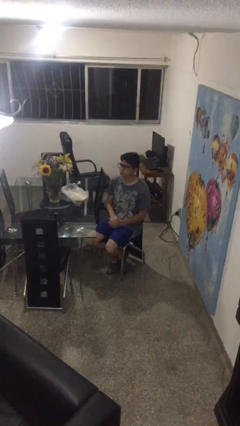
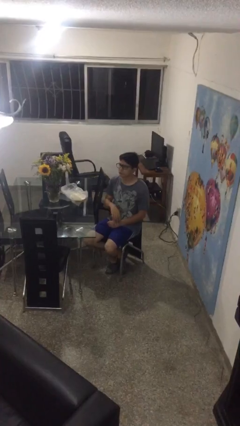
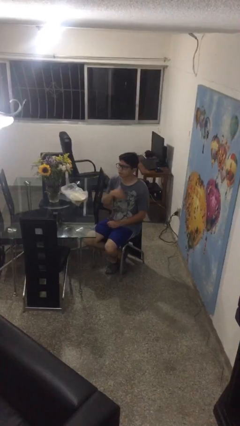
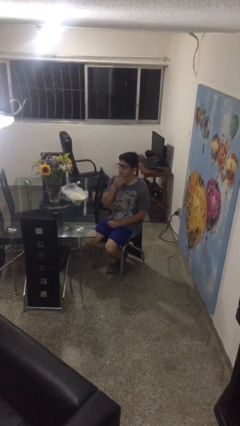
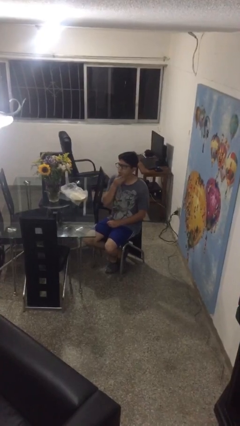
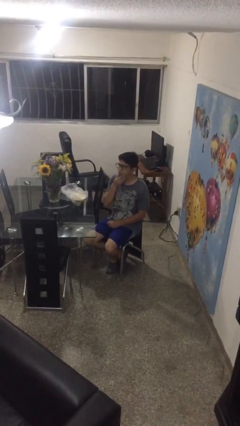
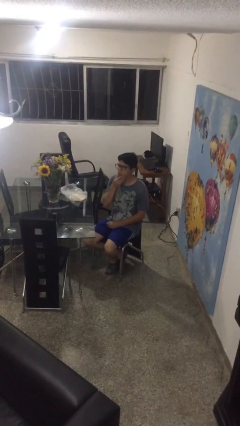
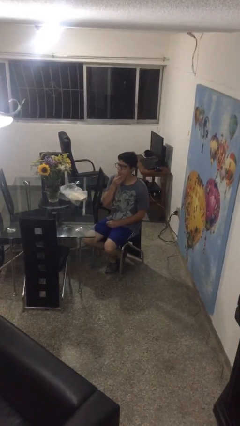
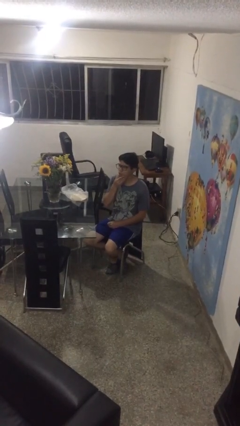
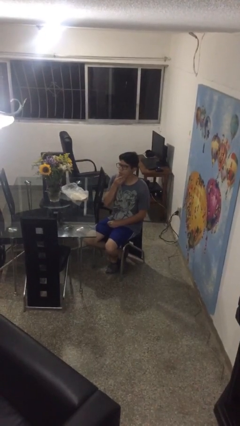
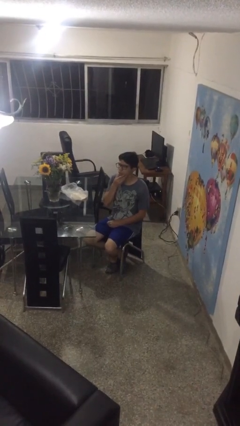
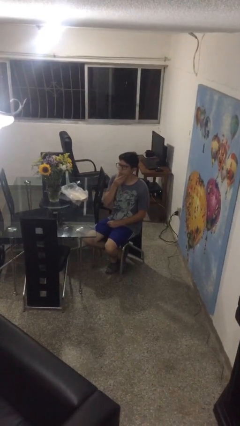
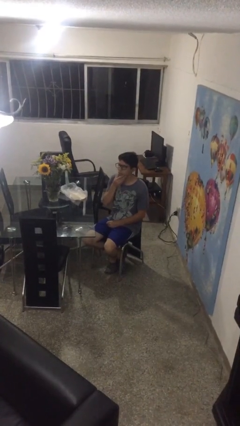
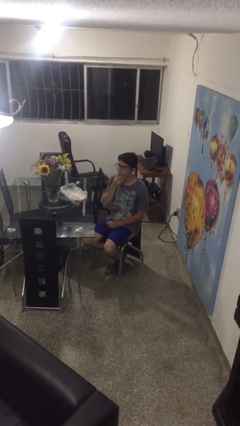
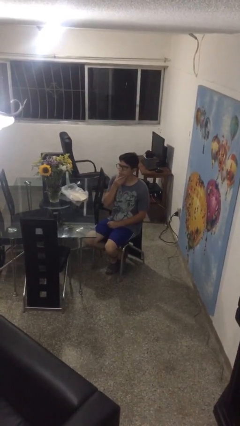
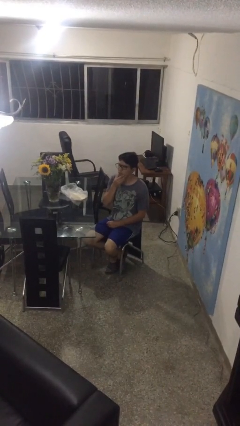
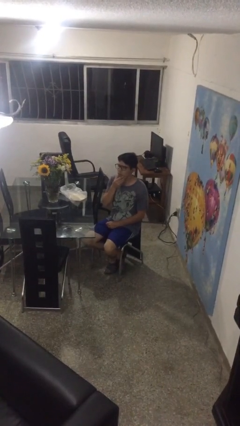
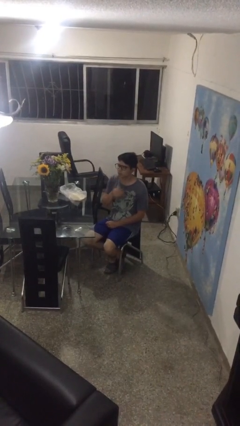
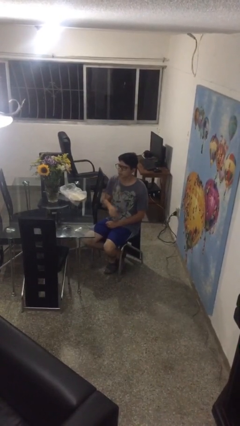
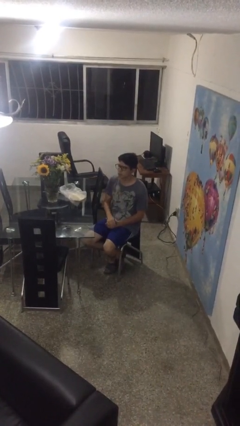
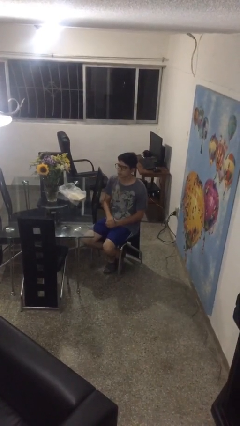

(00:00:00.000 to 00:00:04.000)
person strokes chin

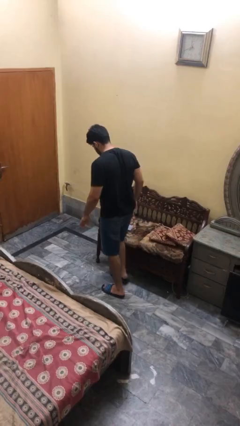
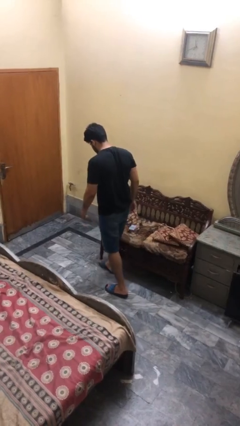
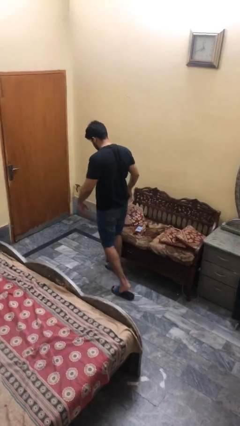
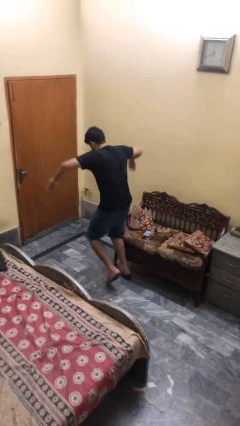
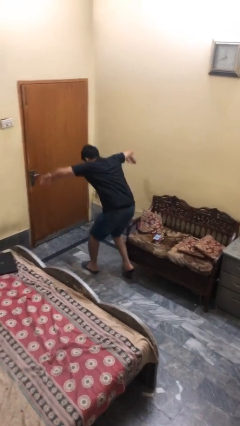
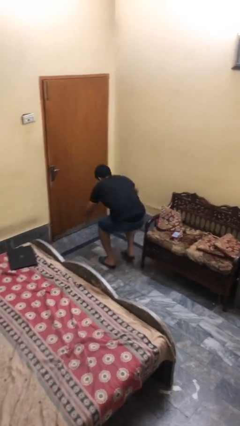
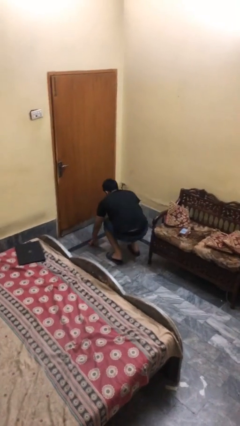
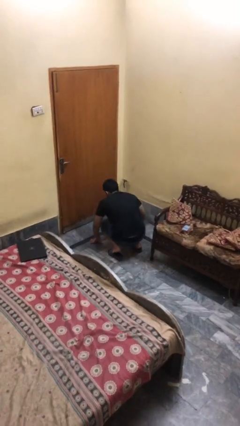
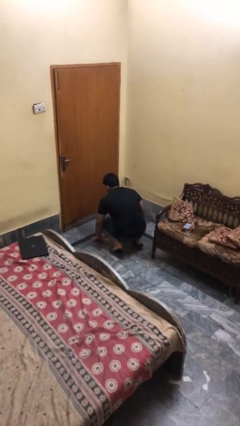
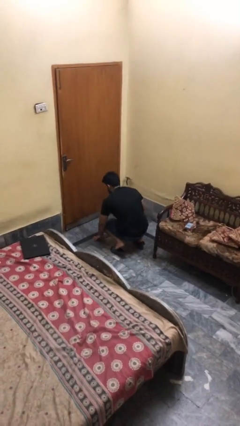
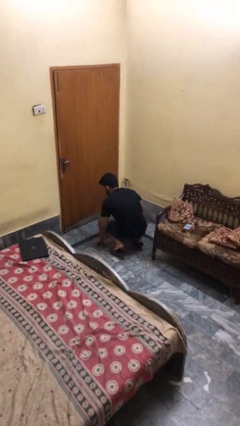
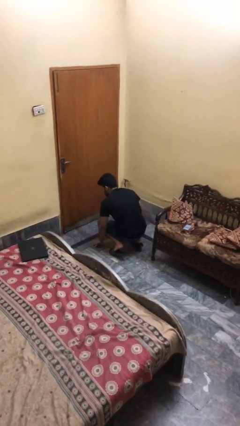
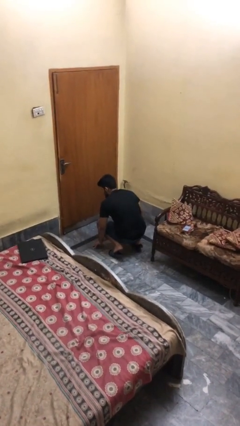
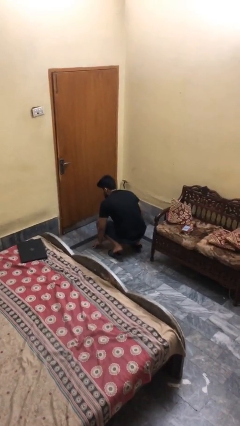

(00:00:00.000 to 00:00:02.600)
person trips on object on floor

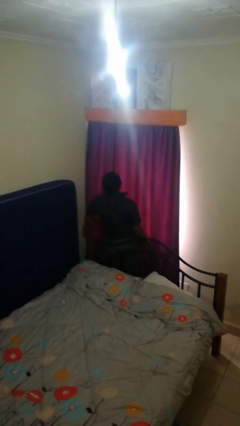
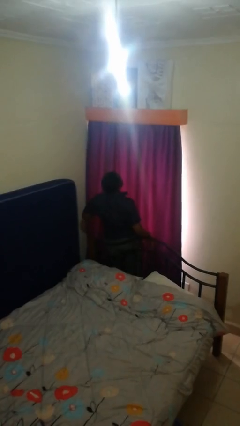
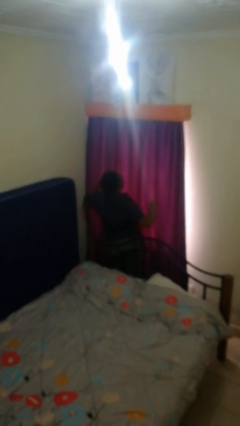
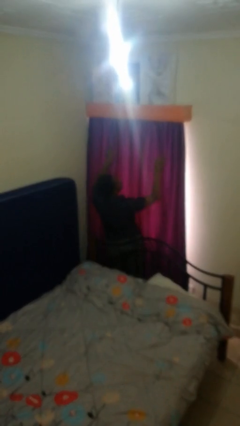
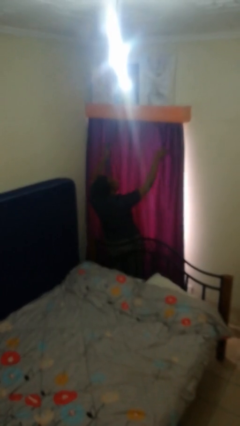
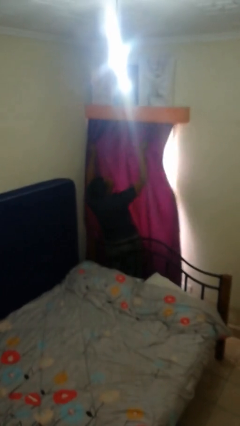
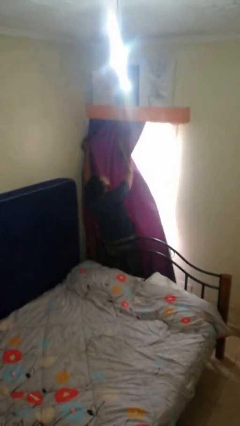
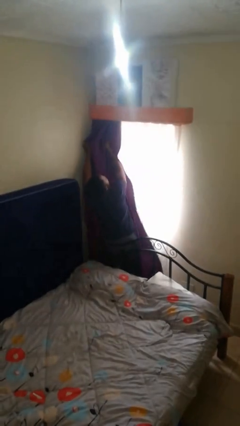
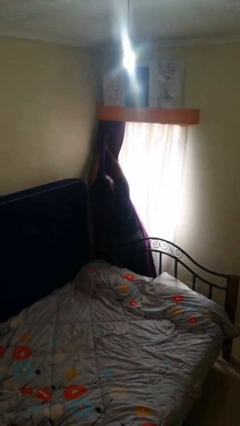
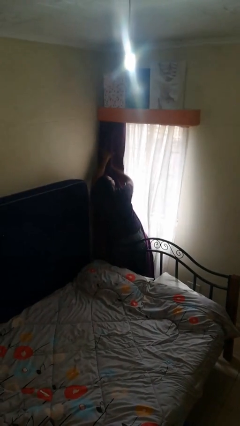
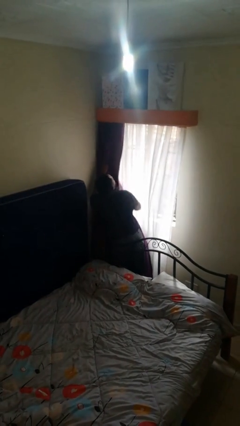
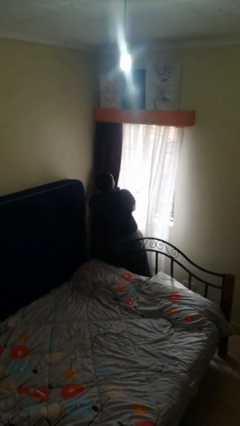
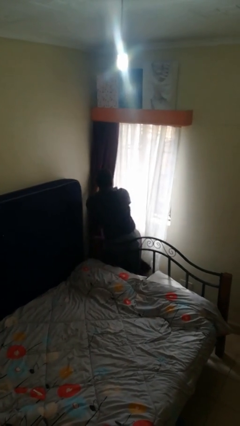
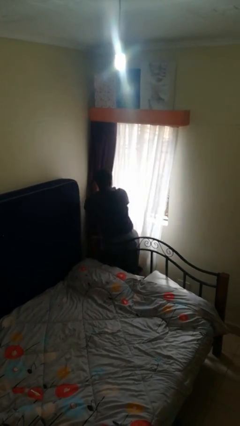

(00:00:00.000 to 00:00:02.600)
person opens curtains

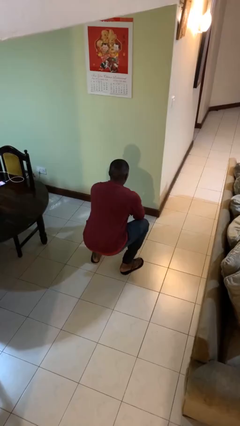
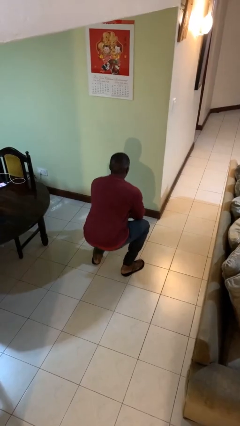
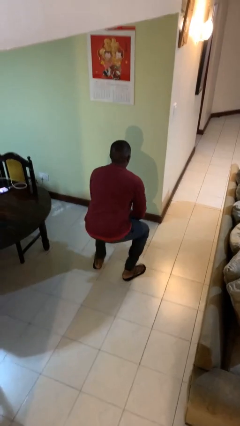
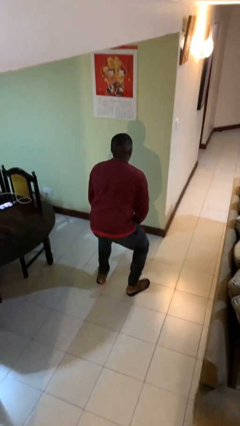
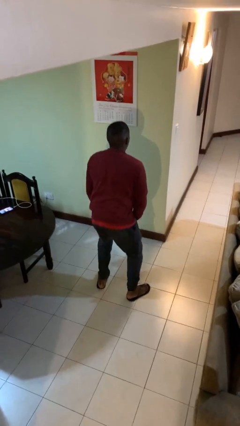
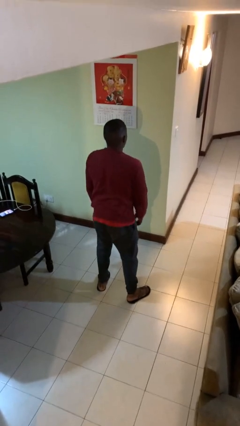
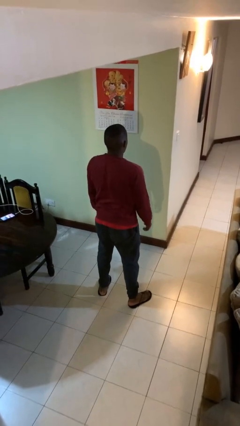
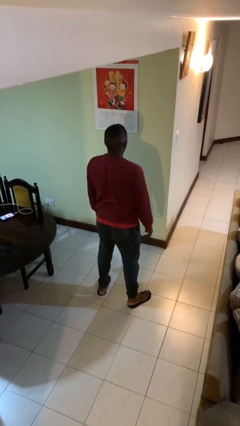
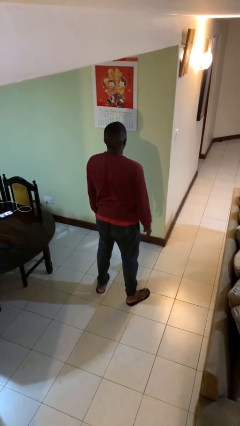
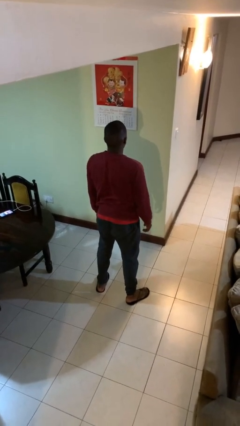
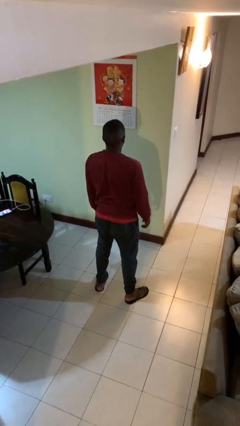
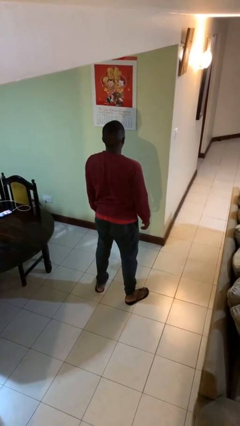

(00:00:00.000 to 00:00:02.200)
person stands up

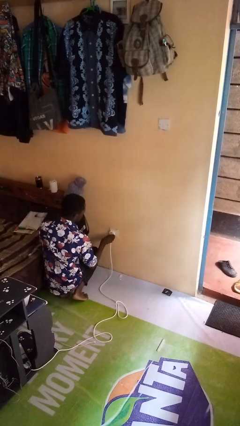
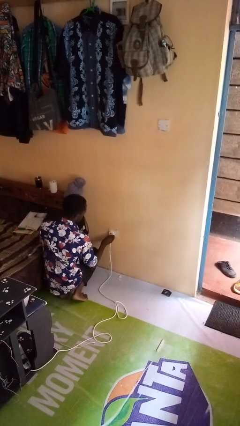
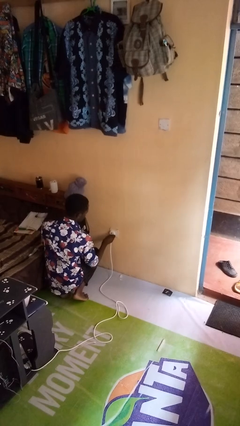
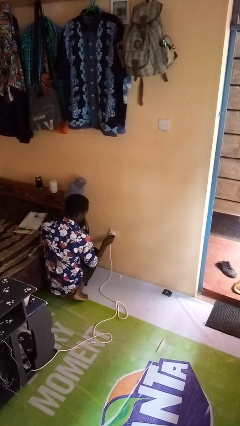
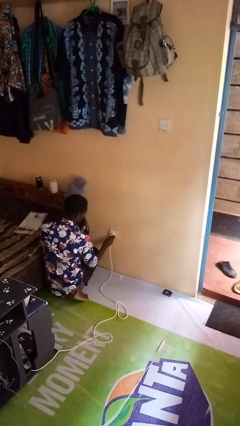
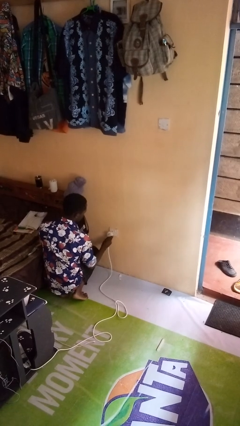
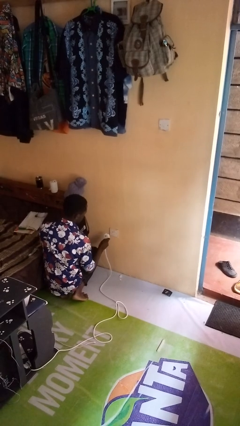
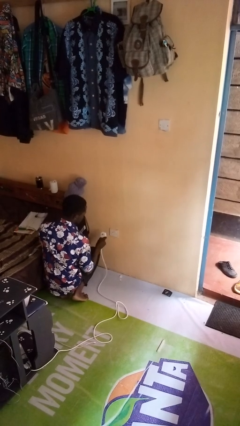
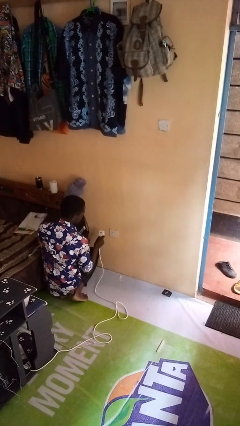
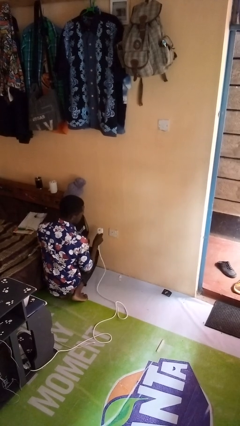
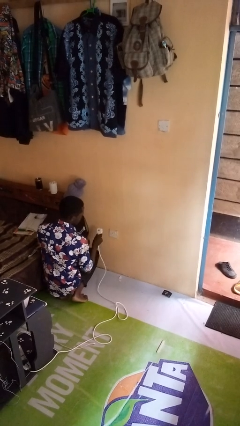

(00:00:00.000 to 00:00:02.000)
person unplugs from electrical socket

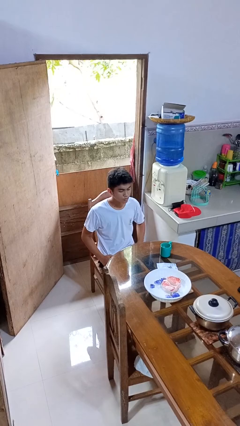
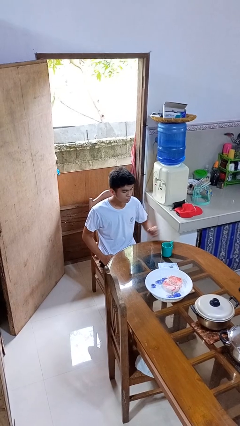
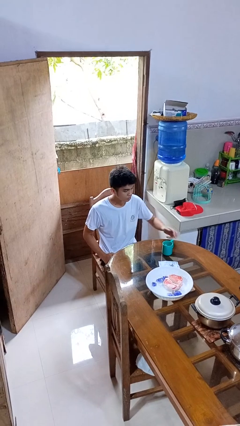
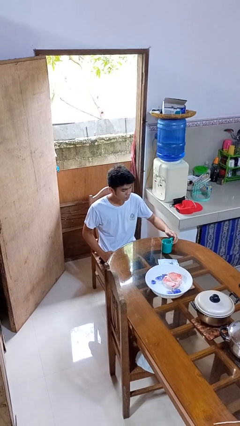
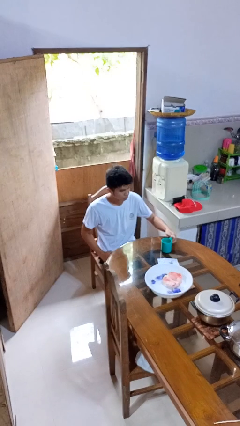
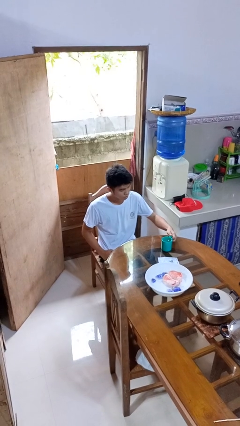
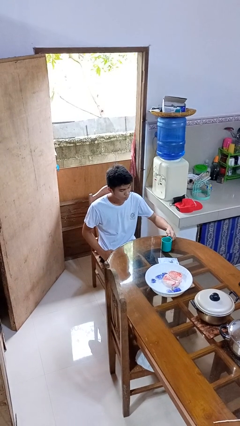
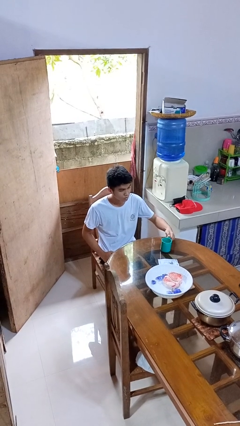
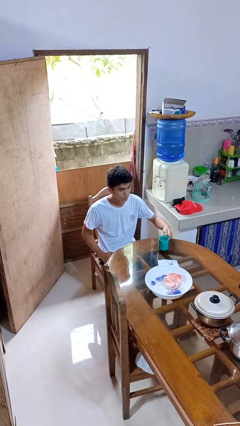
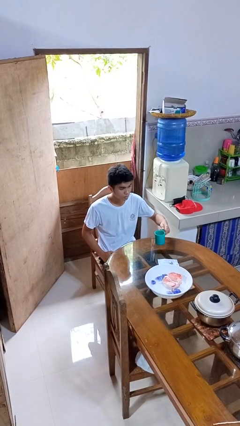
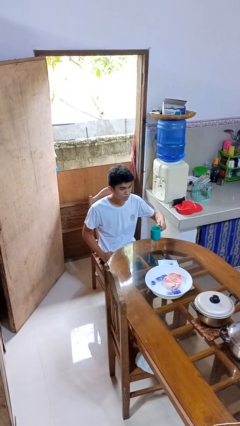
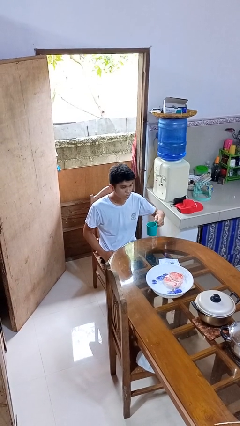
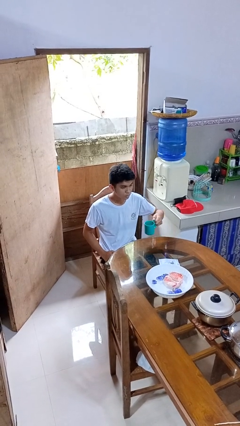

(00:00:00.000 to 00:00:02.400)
person picks up object from table

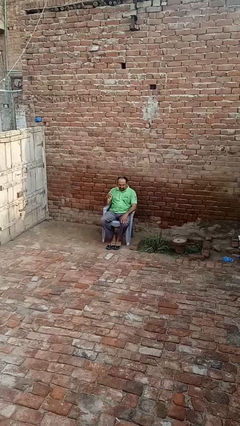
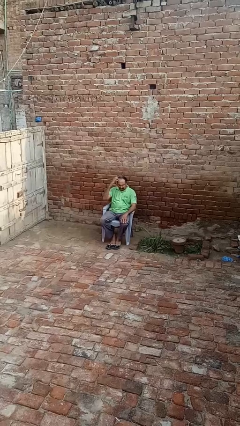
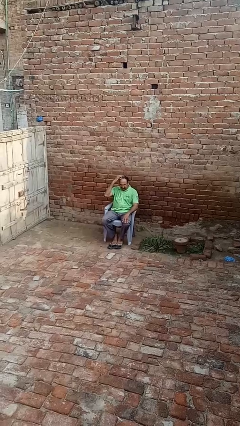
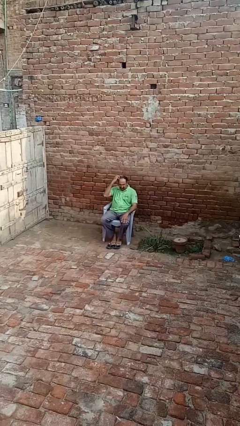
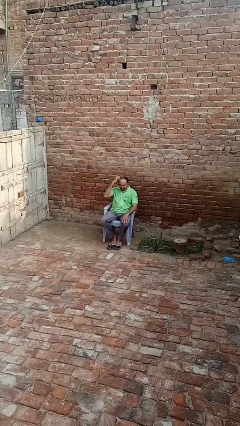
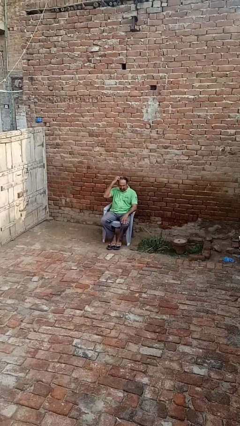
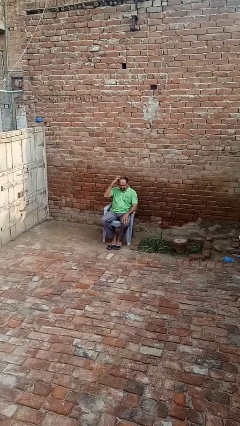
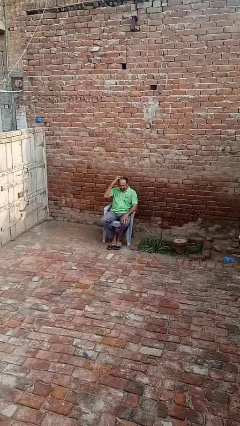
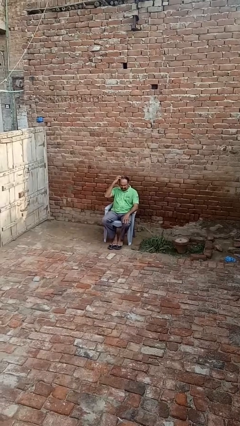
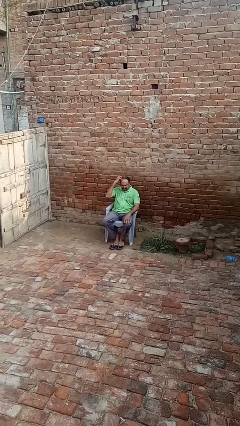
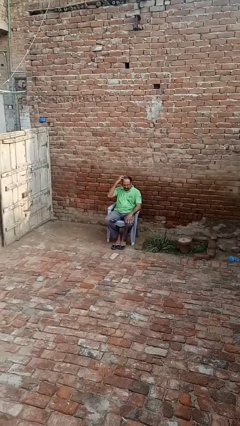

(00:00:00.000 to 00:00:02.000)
person scratches face
